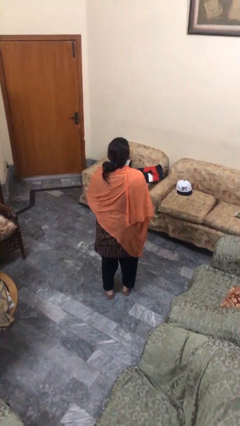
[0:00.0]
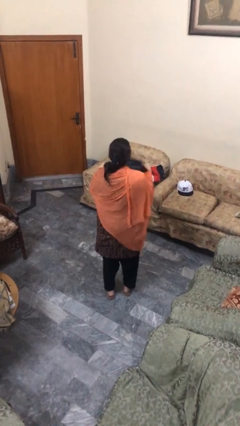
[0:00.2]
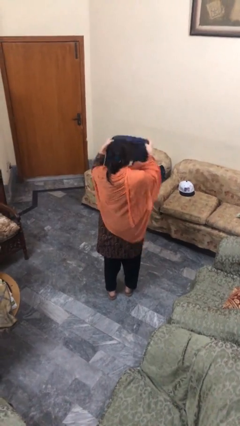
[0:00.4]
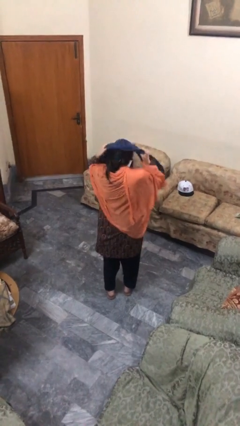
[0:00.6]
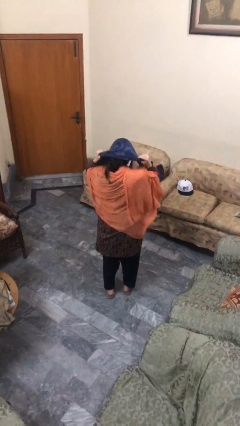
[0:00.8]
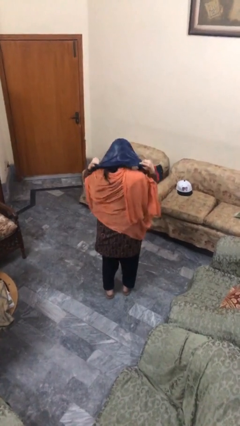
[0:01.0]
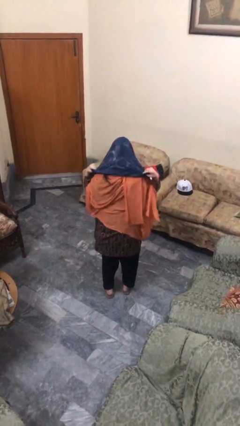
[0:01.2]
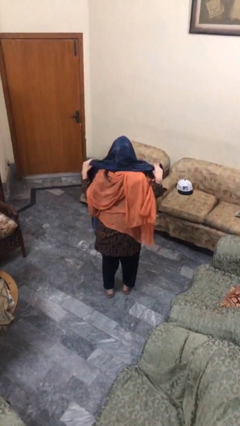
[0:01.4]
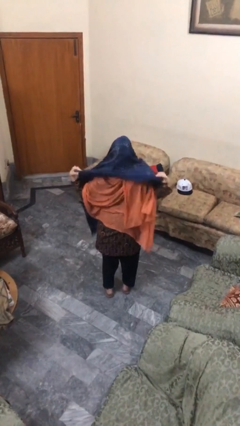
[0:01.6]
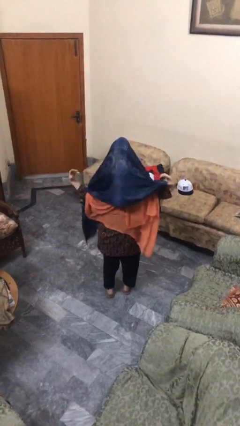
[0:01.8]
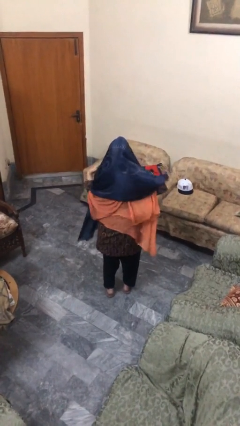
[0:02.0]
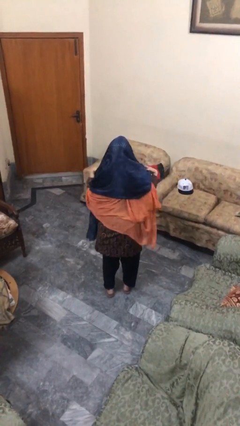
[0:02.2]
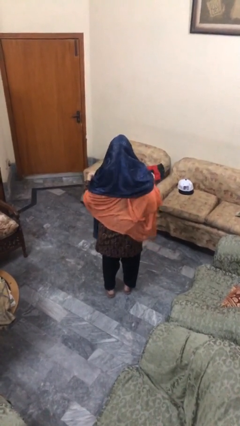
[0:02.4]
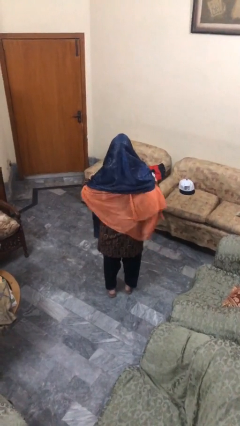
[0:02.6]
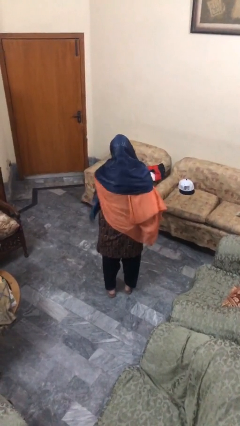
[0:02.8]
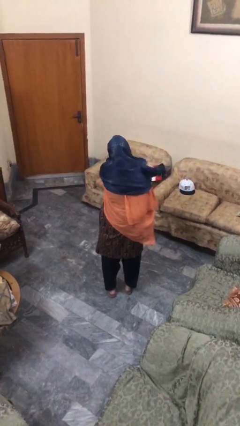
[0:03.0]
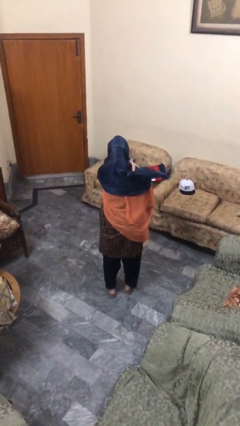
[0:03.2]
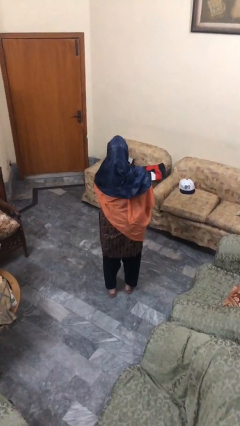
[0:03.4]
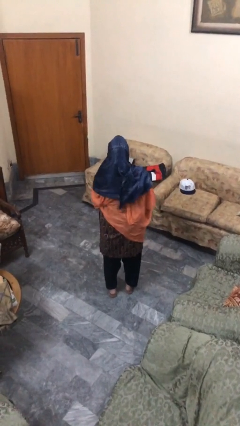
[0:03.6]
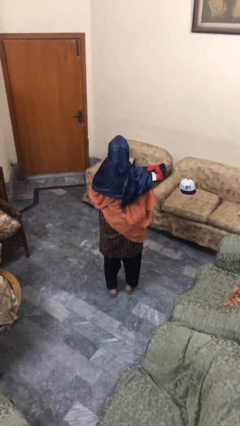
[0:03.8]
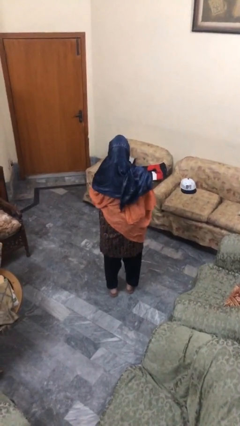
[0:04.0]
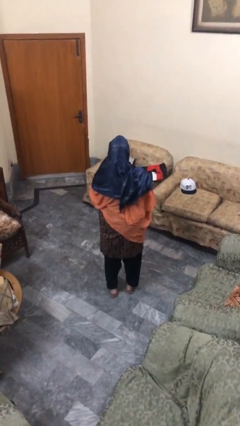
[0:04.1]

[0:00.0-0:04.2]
person puts on scarf

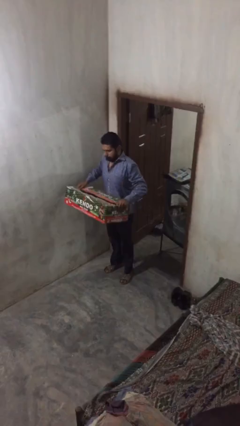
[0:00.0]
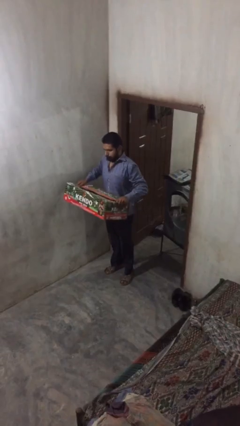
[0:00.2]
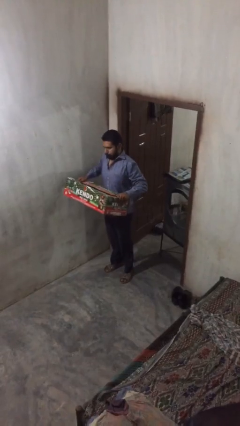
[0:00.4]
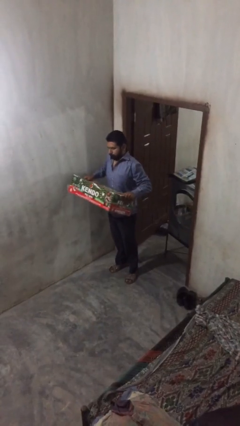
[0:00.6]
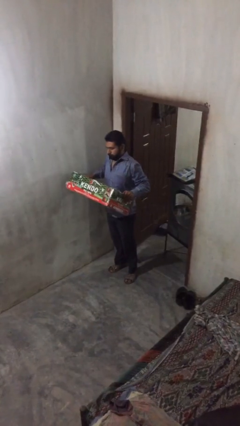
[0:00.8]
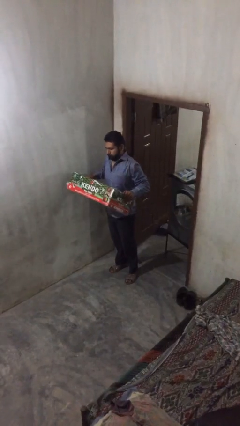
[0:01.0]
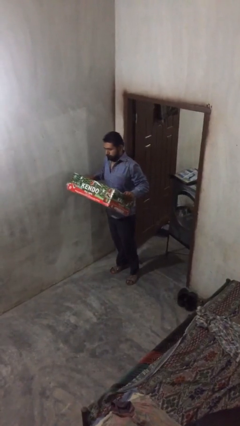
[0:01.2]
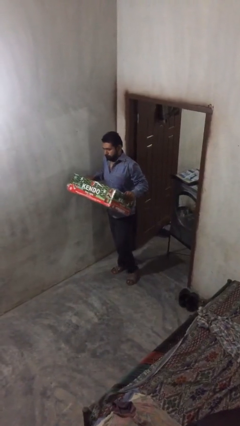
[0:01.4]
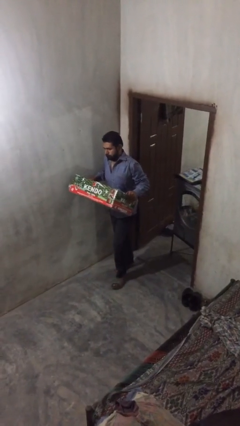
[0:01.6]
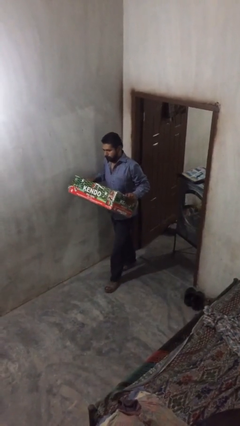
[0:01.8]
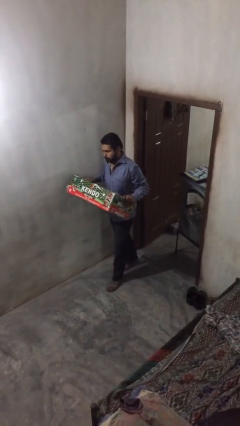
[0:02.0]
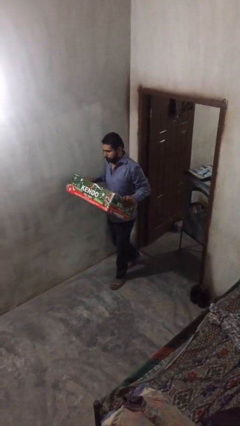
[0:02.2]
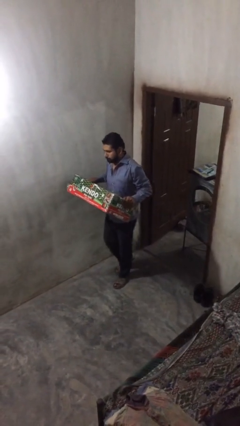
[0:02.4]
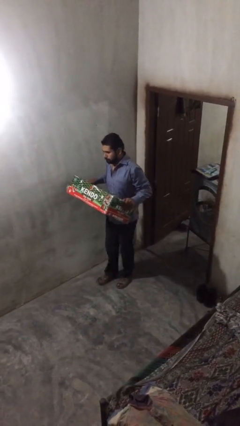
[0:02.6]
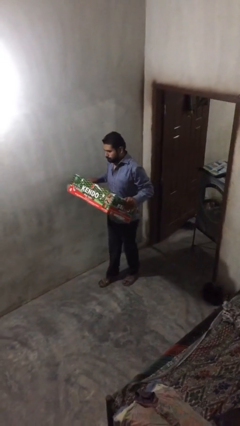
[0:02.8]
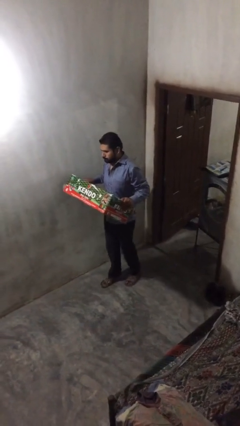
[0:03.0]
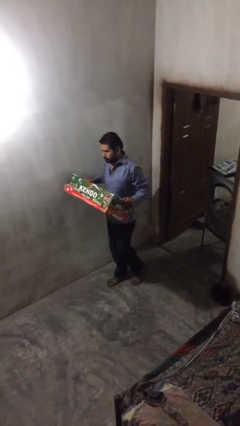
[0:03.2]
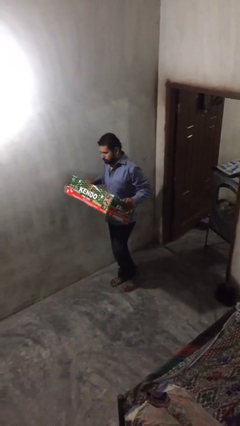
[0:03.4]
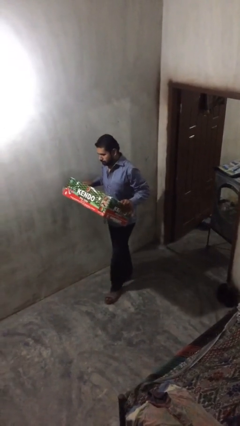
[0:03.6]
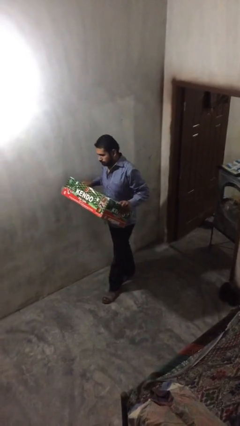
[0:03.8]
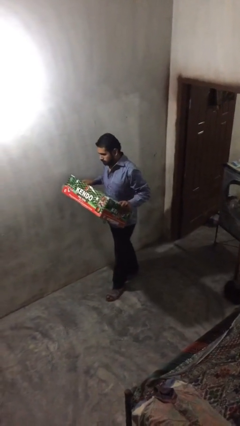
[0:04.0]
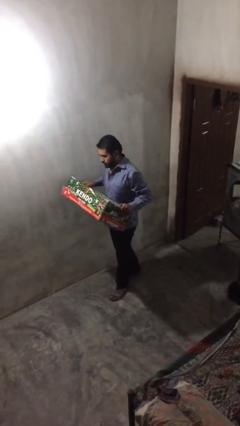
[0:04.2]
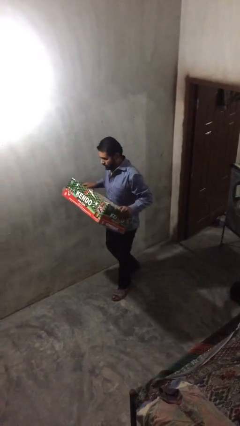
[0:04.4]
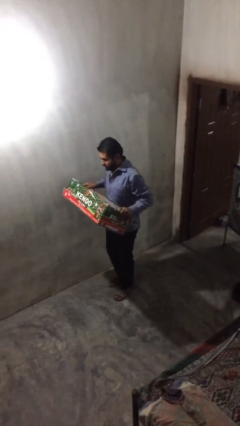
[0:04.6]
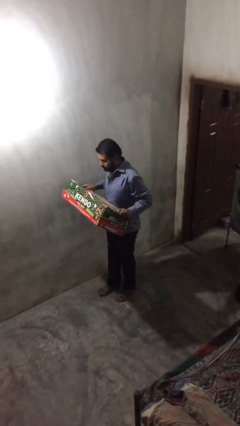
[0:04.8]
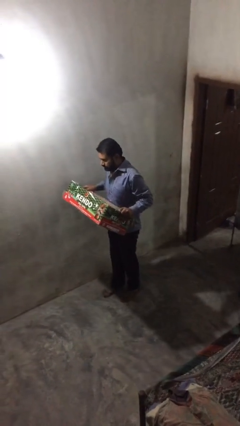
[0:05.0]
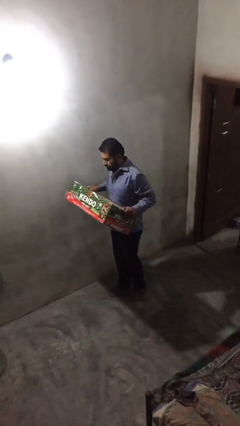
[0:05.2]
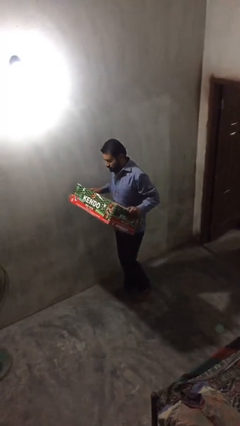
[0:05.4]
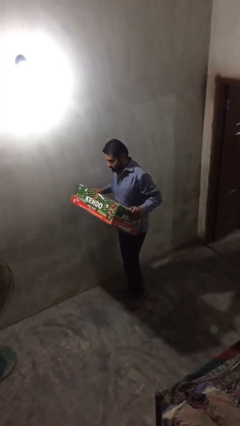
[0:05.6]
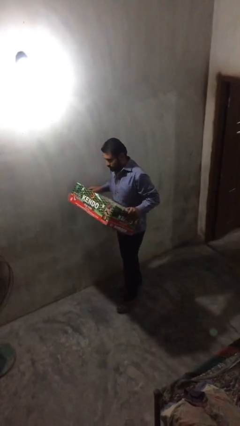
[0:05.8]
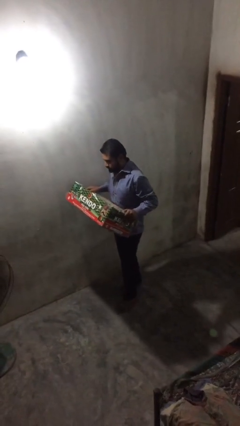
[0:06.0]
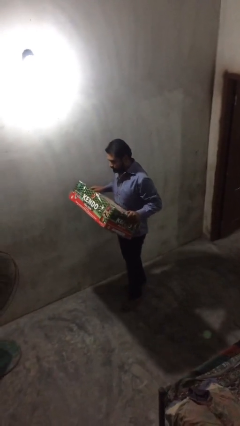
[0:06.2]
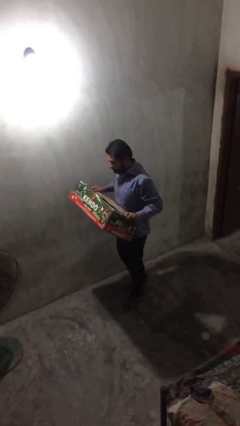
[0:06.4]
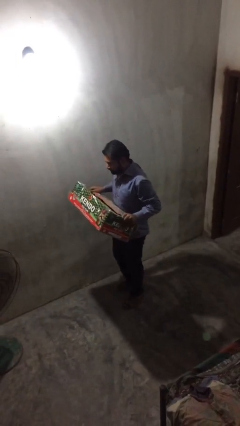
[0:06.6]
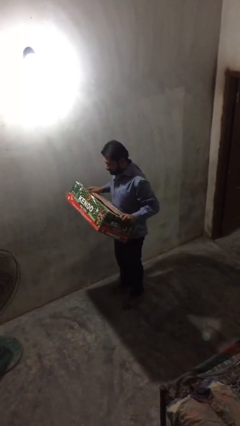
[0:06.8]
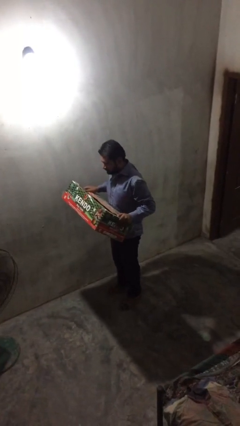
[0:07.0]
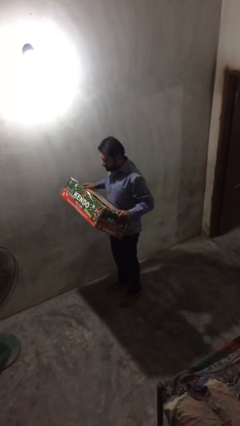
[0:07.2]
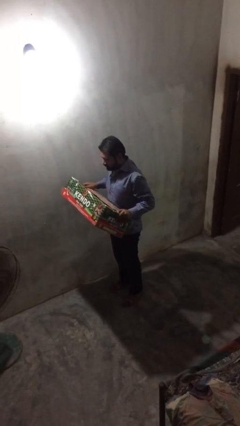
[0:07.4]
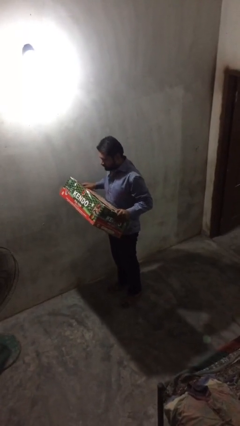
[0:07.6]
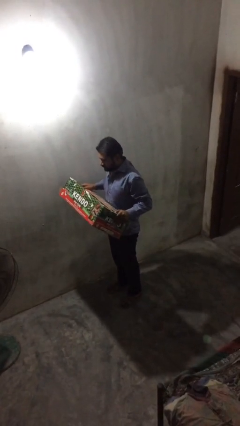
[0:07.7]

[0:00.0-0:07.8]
person carries heavy object

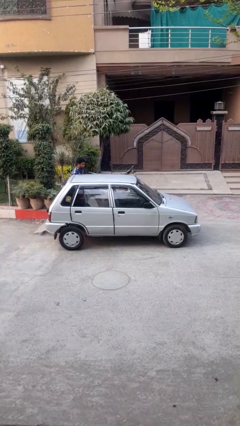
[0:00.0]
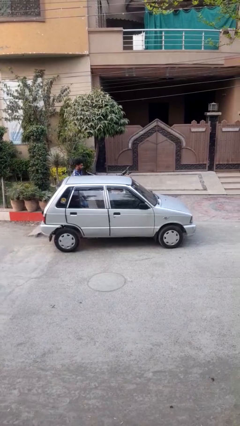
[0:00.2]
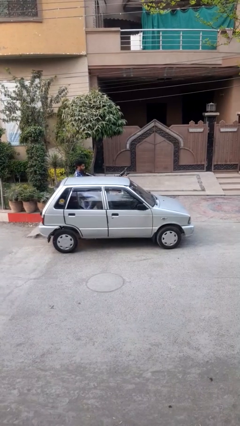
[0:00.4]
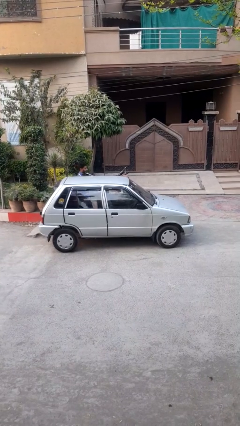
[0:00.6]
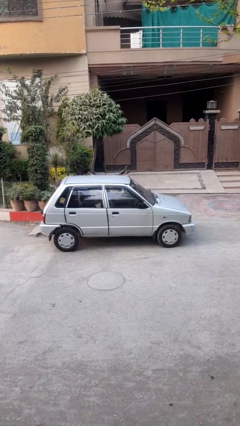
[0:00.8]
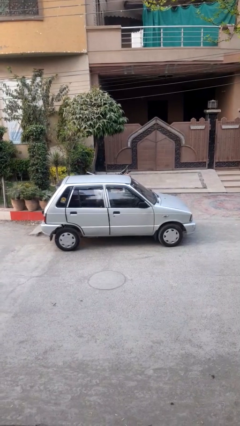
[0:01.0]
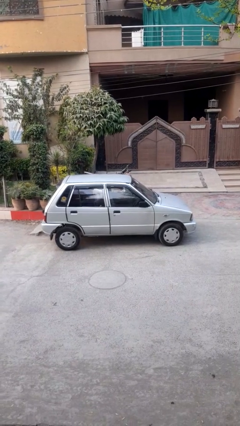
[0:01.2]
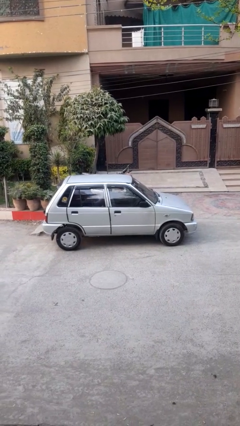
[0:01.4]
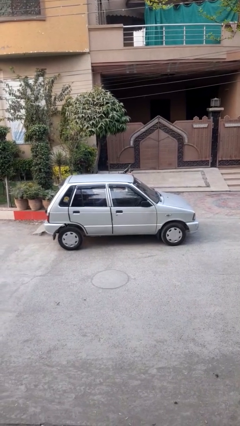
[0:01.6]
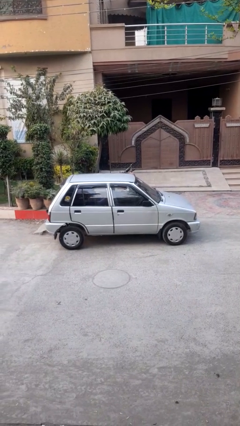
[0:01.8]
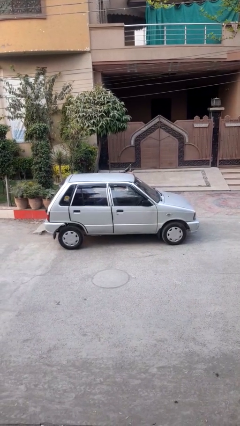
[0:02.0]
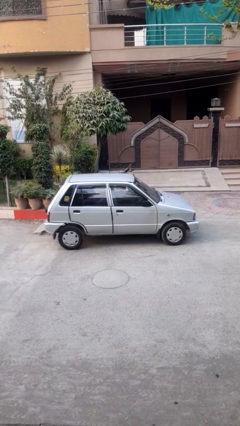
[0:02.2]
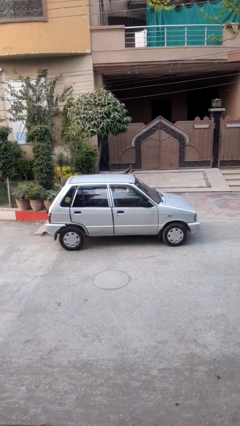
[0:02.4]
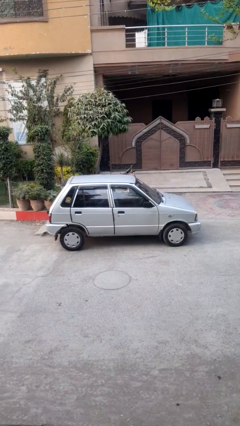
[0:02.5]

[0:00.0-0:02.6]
car picks up person

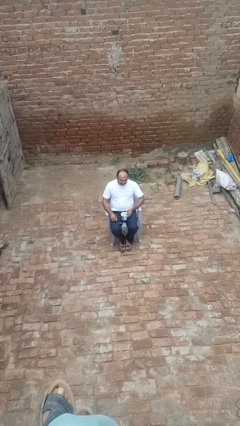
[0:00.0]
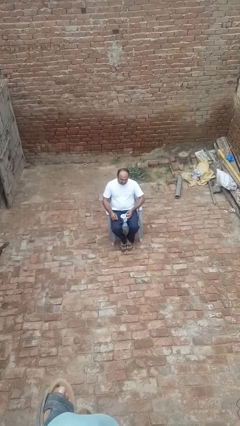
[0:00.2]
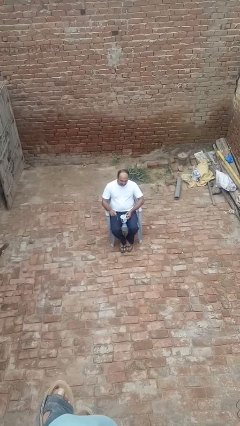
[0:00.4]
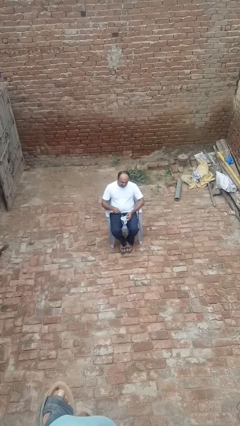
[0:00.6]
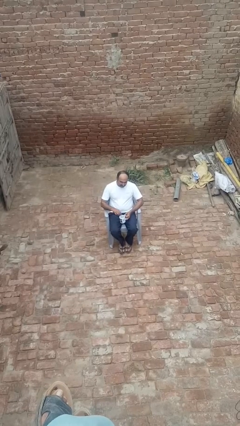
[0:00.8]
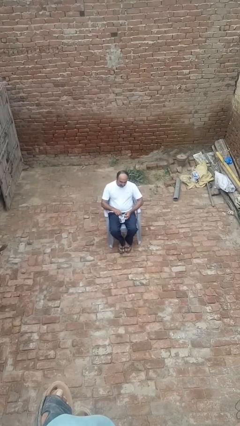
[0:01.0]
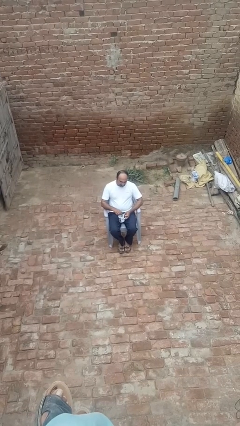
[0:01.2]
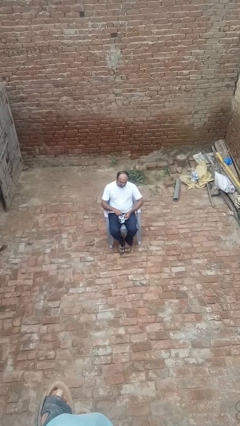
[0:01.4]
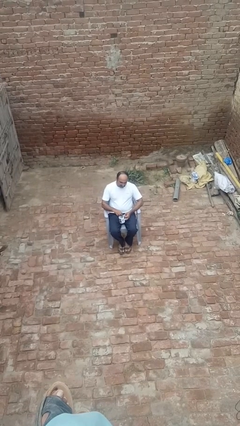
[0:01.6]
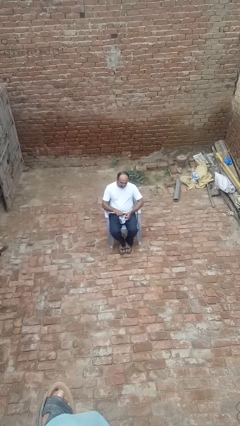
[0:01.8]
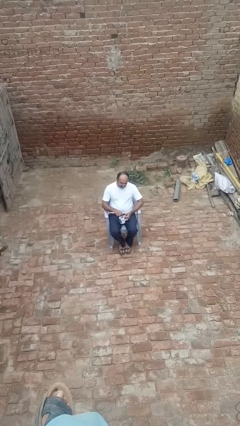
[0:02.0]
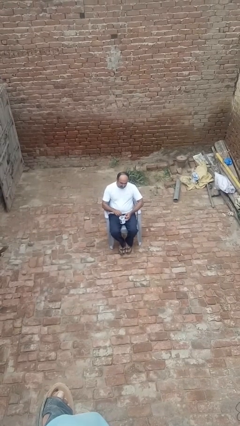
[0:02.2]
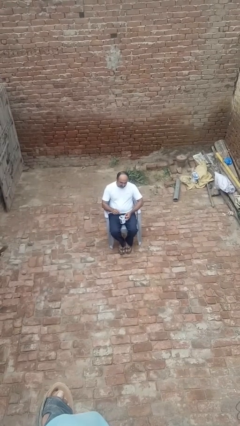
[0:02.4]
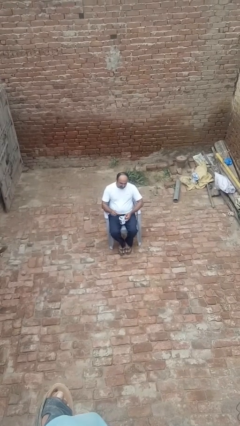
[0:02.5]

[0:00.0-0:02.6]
person stirs mug
